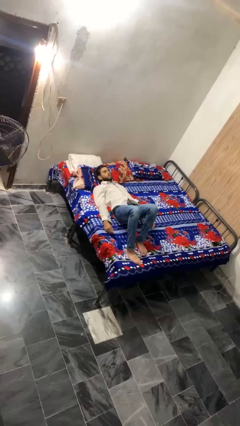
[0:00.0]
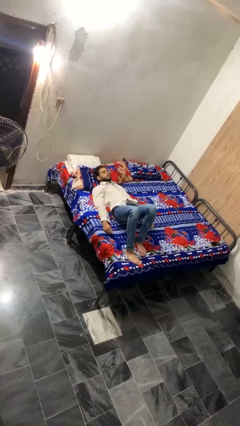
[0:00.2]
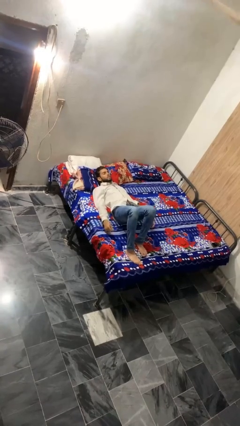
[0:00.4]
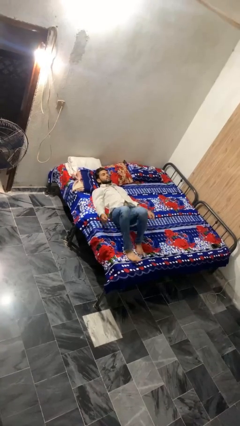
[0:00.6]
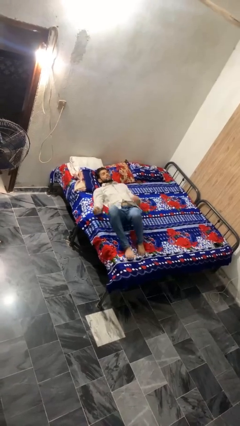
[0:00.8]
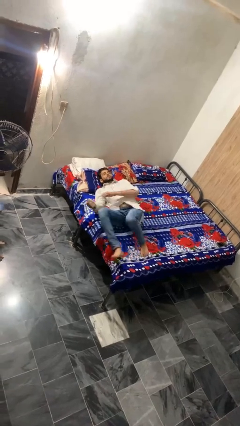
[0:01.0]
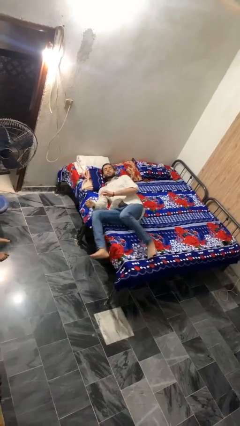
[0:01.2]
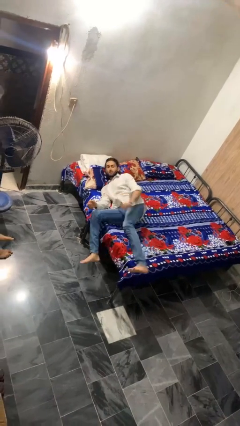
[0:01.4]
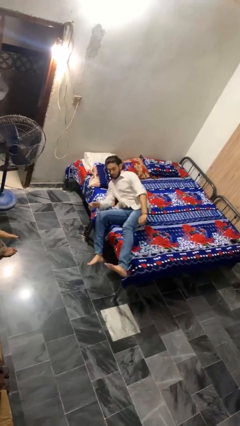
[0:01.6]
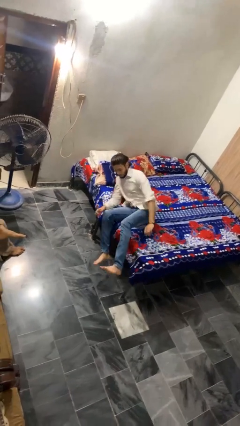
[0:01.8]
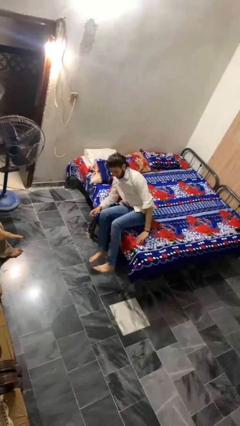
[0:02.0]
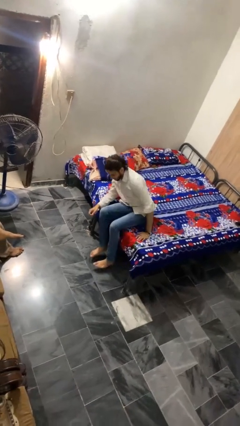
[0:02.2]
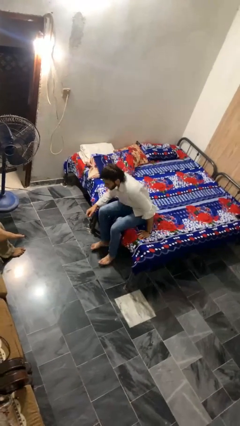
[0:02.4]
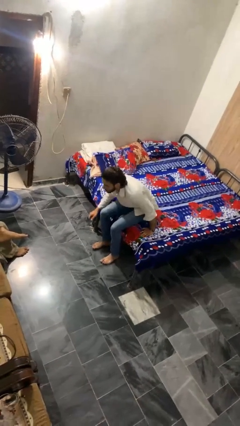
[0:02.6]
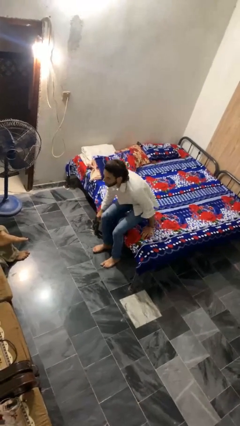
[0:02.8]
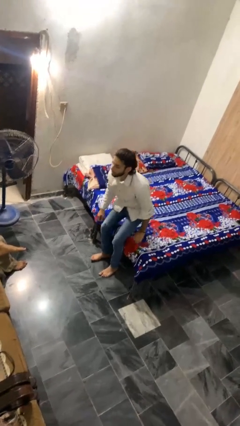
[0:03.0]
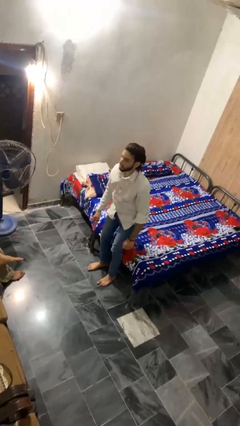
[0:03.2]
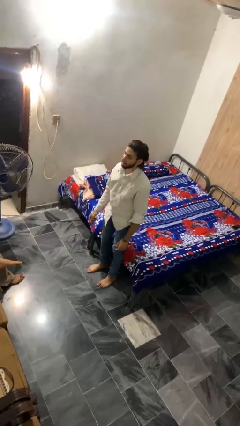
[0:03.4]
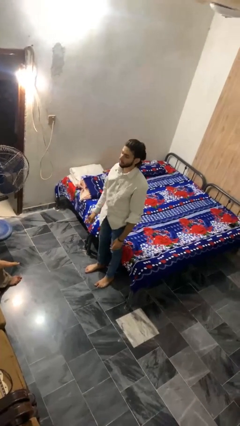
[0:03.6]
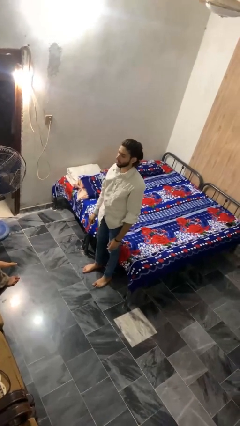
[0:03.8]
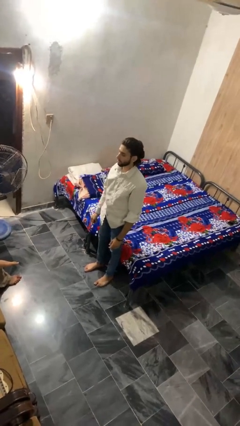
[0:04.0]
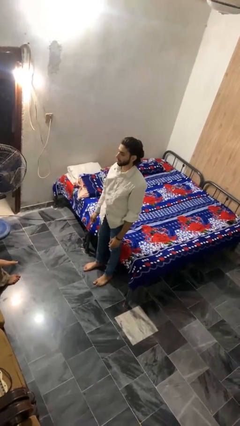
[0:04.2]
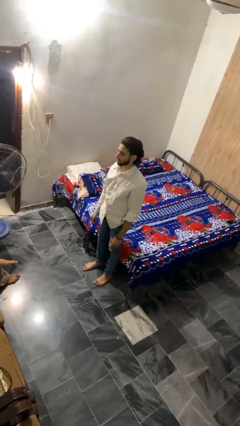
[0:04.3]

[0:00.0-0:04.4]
person stands up

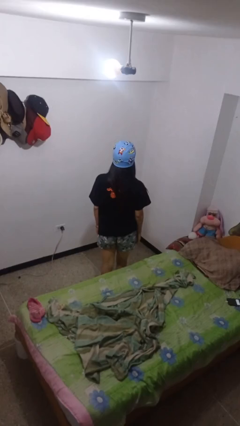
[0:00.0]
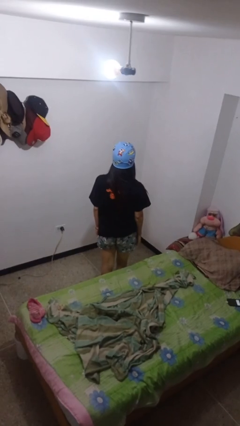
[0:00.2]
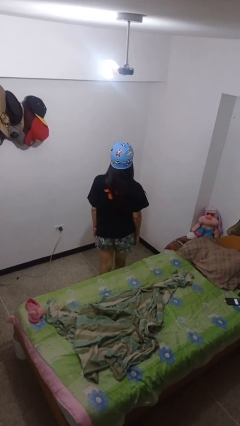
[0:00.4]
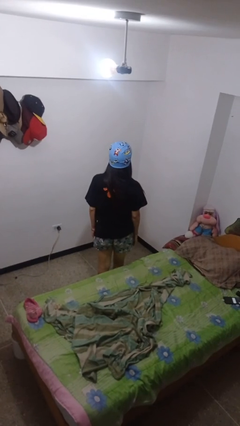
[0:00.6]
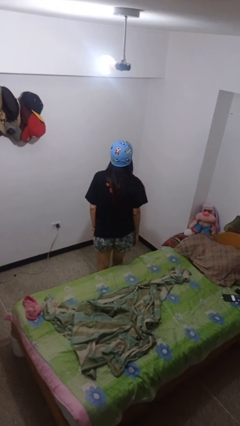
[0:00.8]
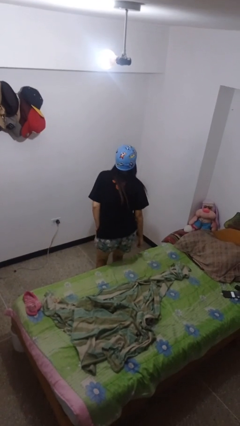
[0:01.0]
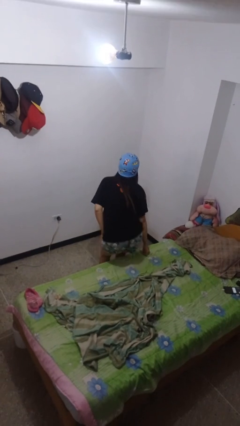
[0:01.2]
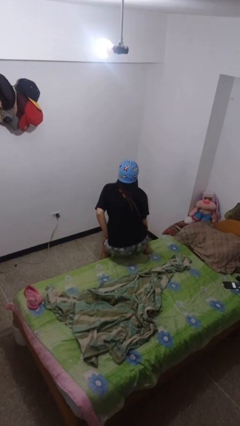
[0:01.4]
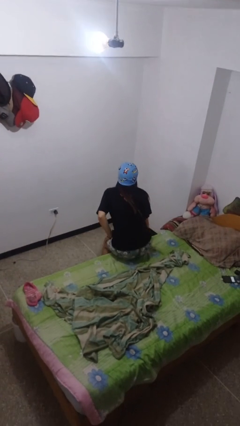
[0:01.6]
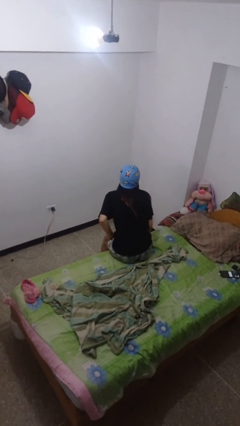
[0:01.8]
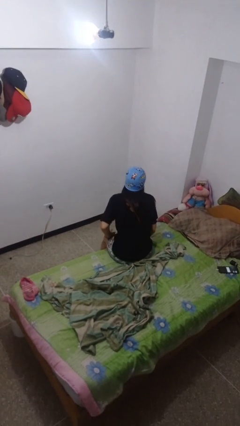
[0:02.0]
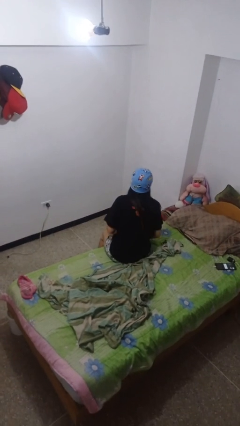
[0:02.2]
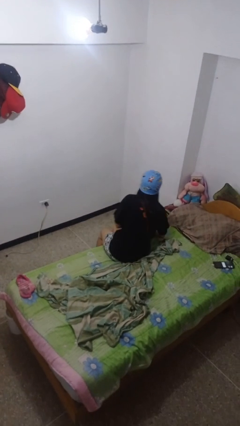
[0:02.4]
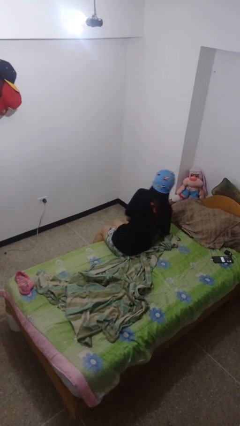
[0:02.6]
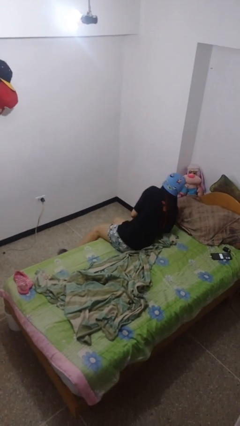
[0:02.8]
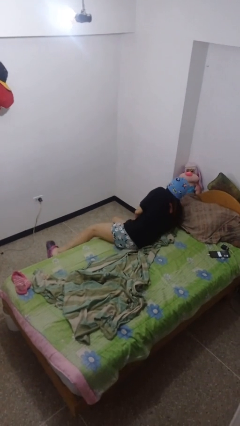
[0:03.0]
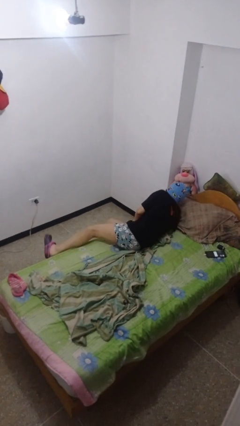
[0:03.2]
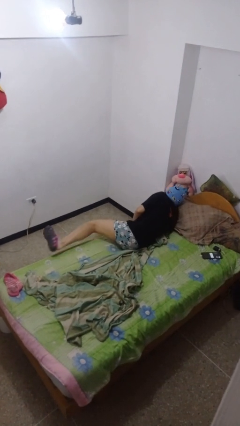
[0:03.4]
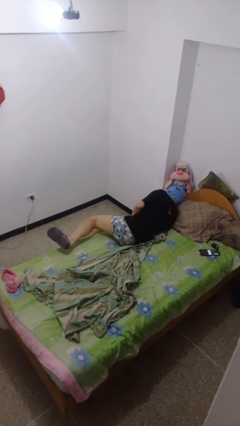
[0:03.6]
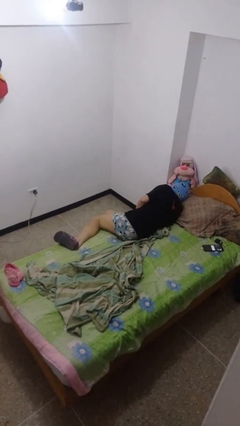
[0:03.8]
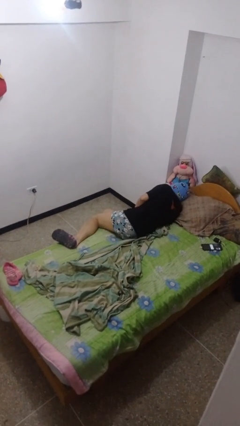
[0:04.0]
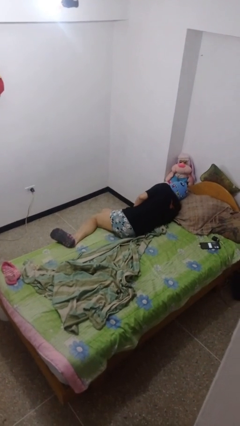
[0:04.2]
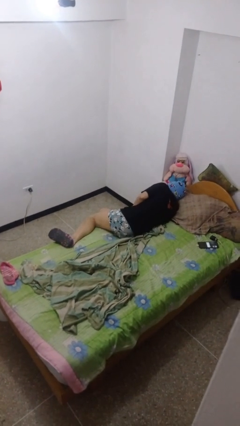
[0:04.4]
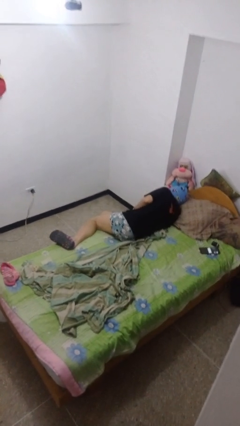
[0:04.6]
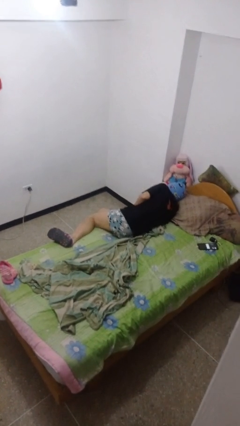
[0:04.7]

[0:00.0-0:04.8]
person lies down on bed

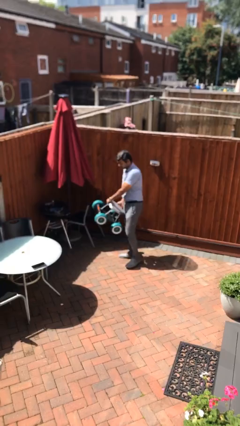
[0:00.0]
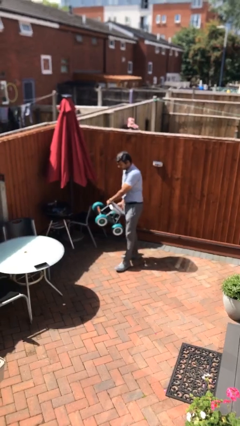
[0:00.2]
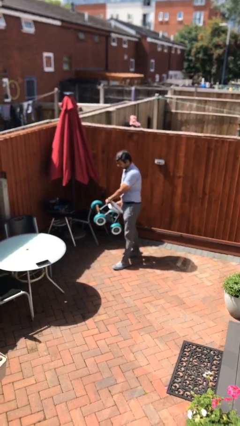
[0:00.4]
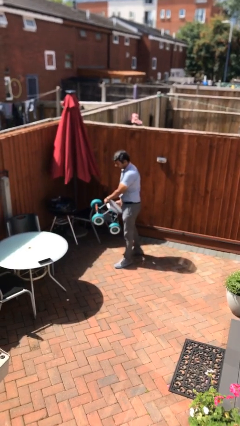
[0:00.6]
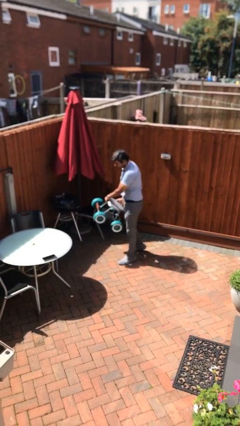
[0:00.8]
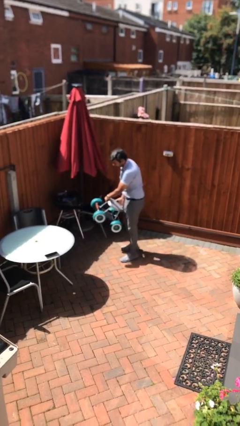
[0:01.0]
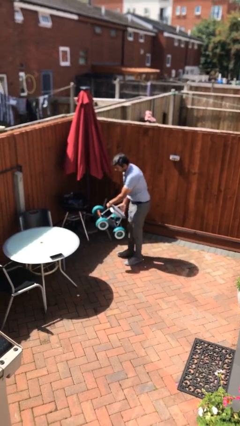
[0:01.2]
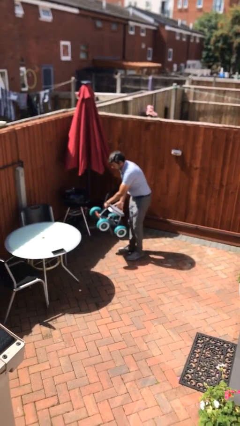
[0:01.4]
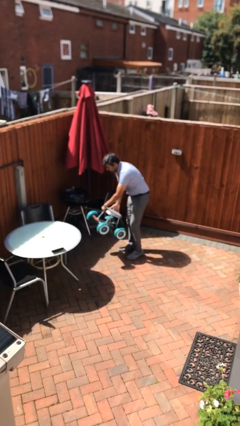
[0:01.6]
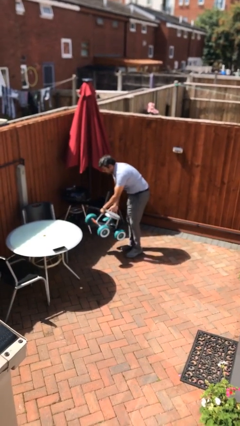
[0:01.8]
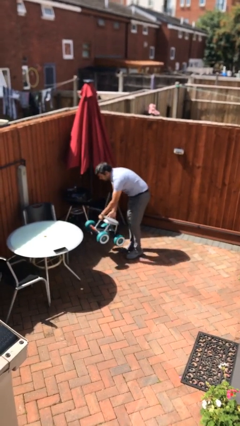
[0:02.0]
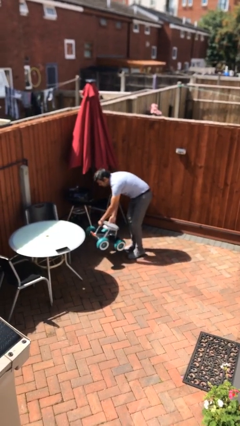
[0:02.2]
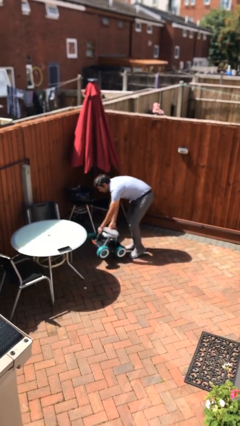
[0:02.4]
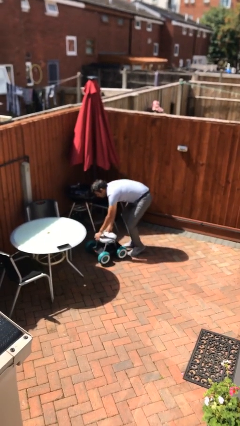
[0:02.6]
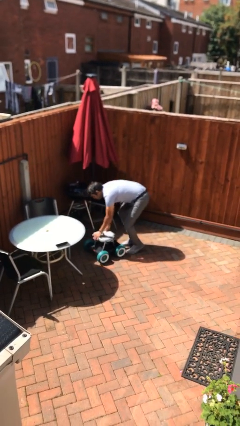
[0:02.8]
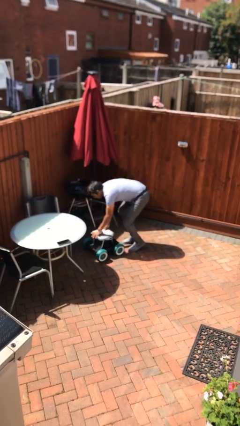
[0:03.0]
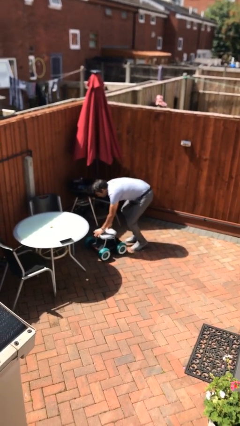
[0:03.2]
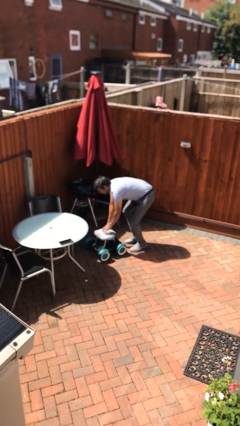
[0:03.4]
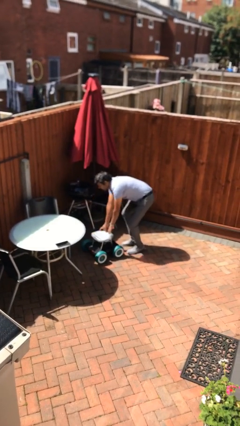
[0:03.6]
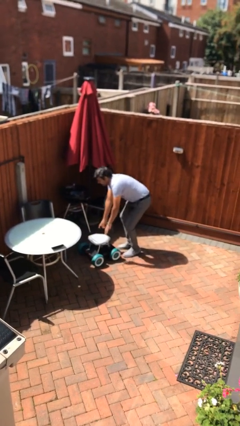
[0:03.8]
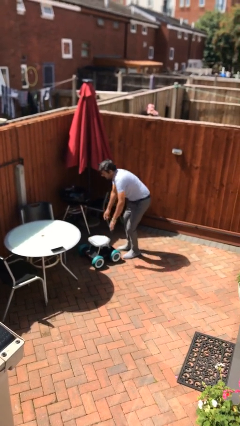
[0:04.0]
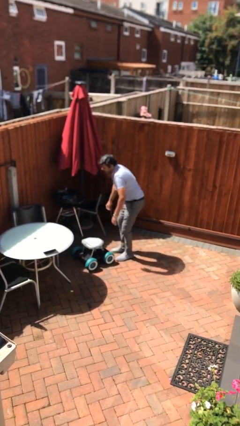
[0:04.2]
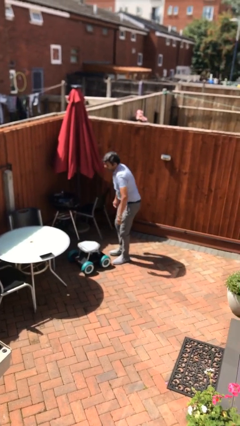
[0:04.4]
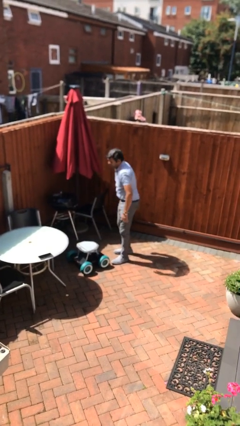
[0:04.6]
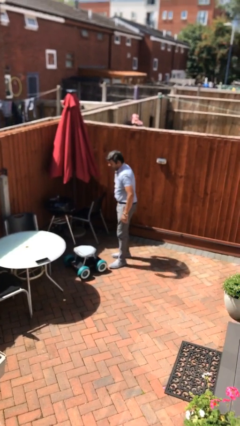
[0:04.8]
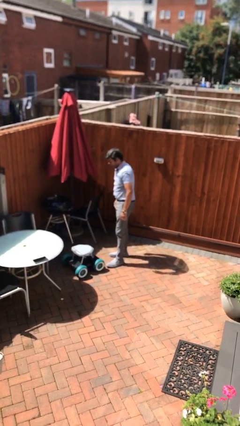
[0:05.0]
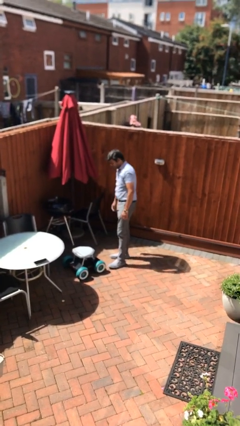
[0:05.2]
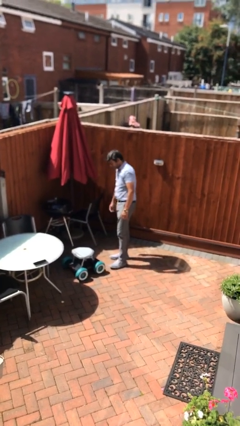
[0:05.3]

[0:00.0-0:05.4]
person puts down object on floor

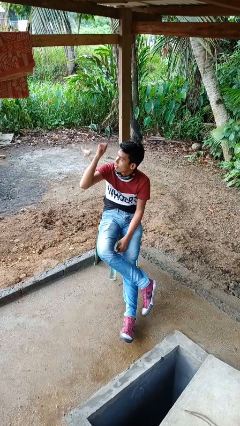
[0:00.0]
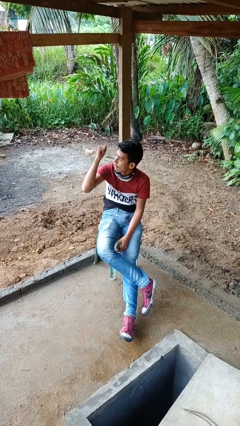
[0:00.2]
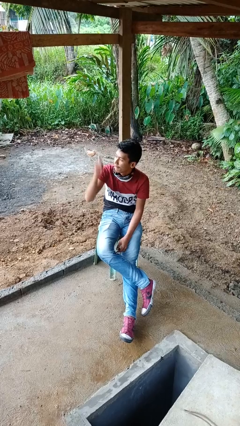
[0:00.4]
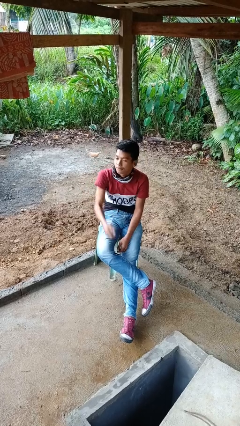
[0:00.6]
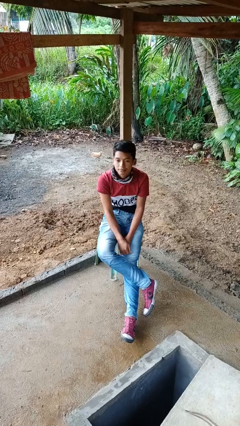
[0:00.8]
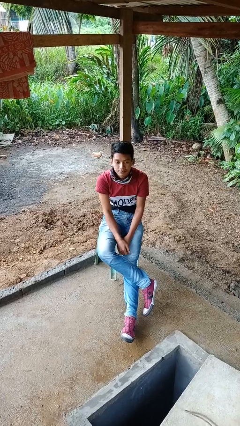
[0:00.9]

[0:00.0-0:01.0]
person gestures behind me

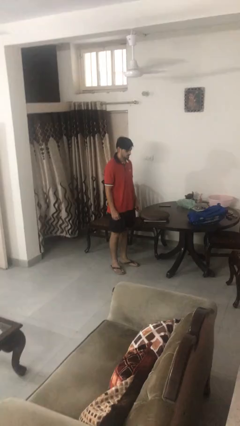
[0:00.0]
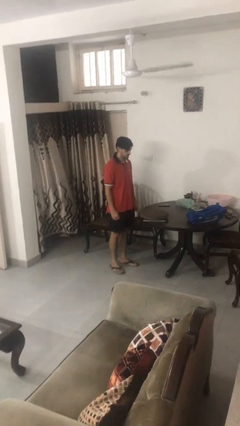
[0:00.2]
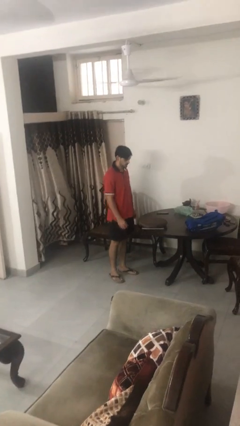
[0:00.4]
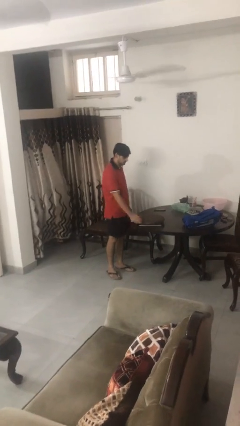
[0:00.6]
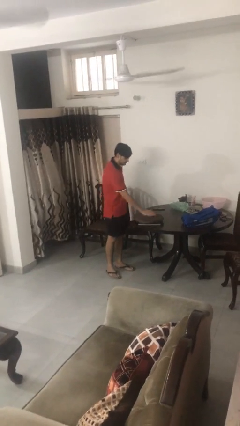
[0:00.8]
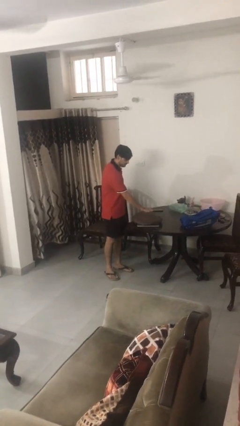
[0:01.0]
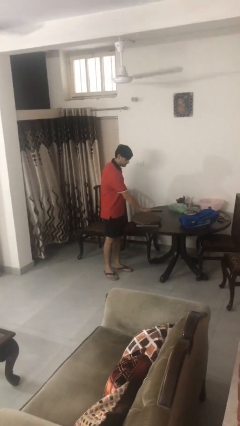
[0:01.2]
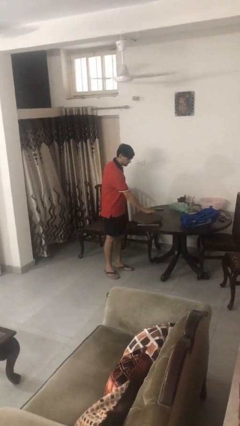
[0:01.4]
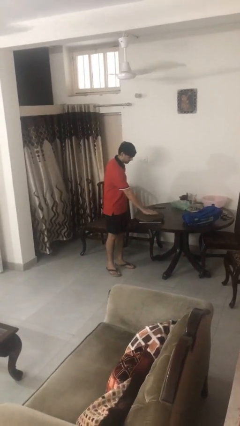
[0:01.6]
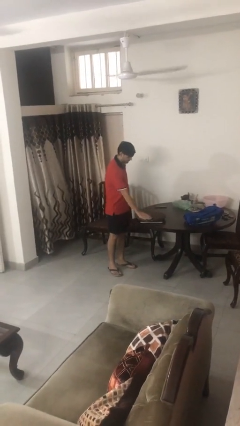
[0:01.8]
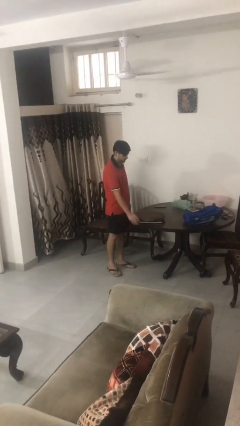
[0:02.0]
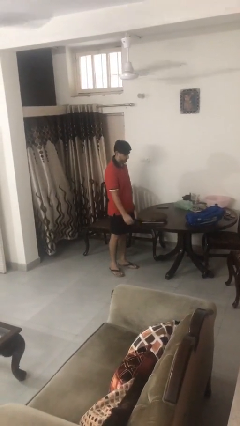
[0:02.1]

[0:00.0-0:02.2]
person waves hand over object
